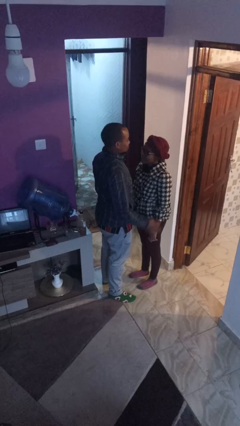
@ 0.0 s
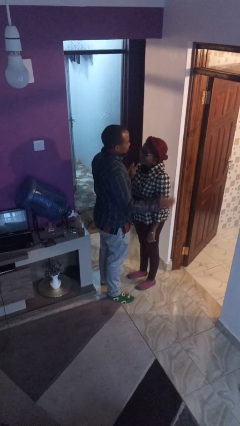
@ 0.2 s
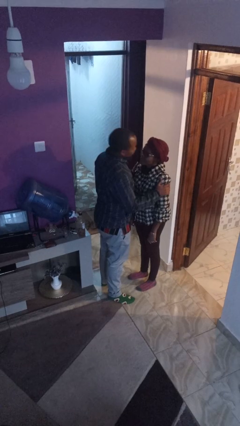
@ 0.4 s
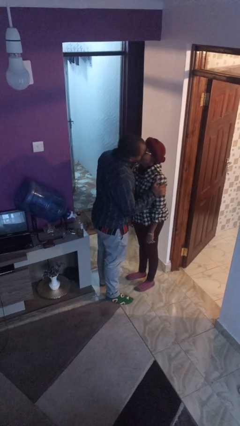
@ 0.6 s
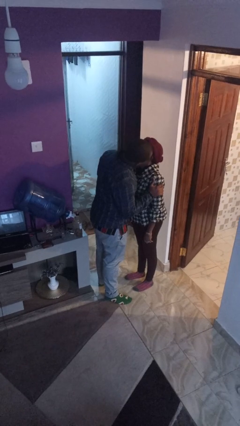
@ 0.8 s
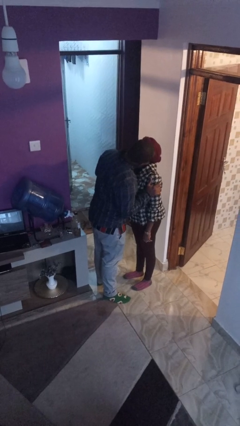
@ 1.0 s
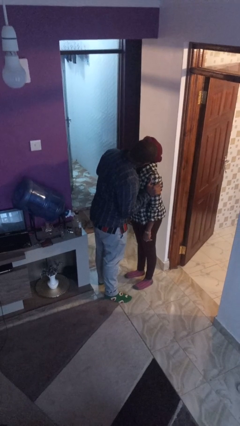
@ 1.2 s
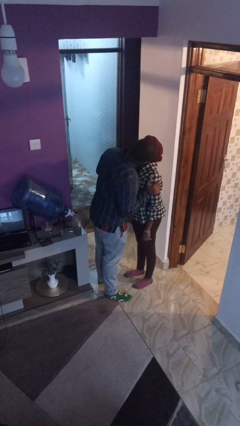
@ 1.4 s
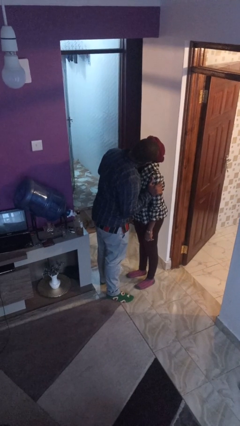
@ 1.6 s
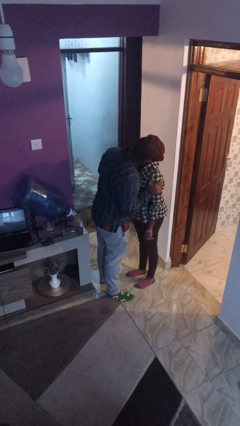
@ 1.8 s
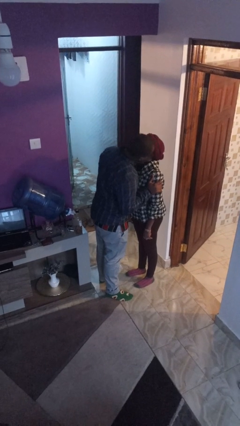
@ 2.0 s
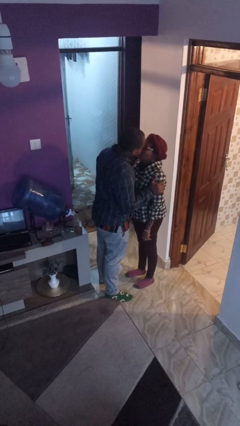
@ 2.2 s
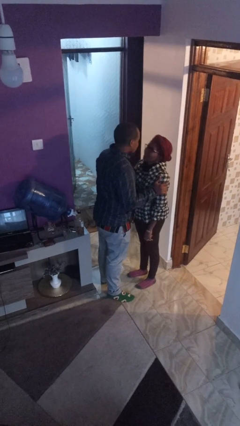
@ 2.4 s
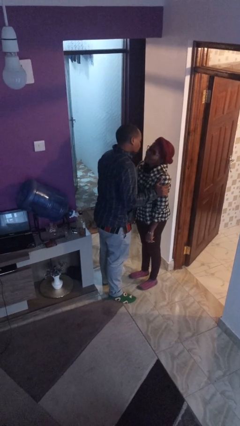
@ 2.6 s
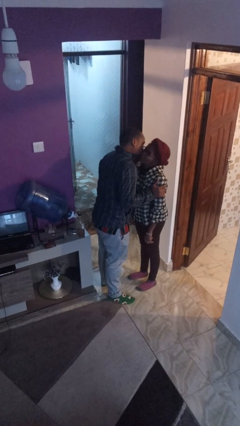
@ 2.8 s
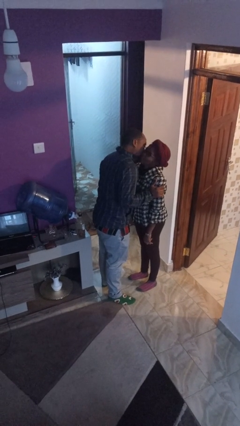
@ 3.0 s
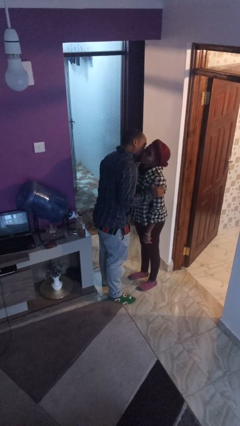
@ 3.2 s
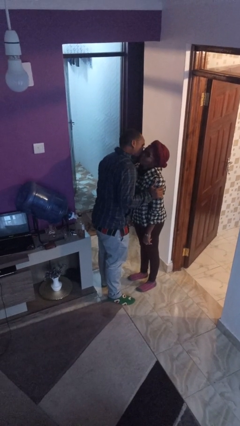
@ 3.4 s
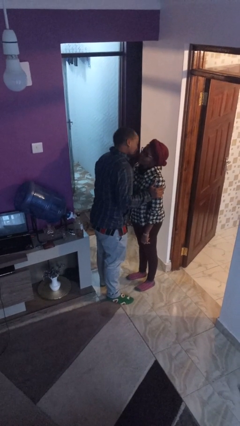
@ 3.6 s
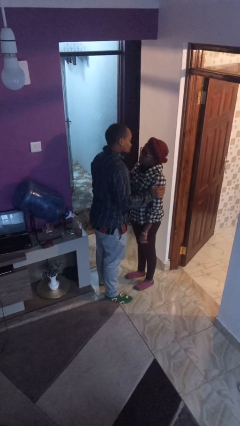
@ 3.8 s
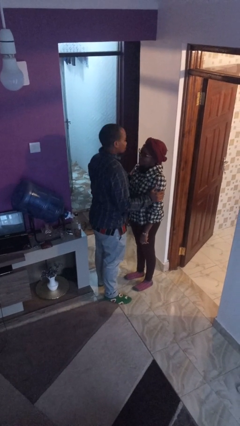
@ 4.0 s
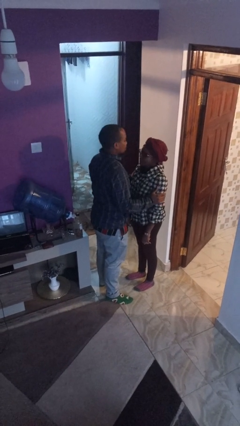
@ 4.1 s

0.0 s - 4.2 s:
person kisses cheek of person

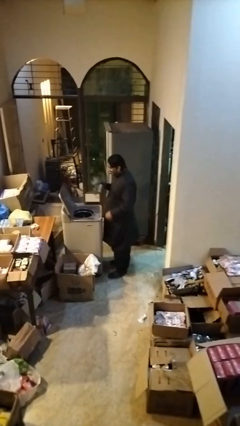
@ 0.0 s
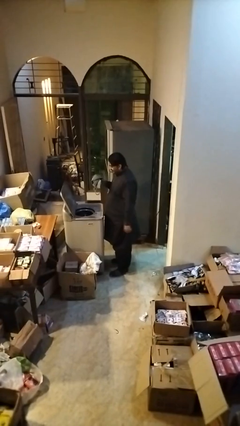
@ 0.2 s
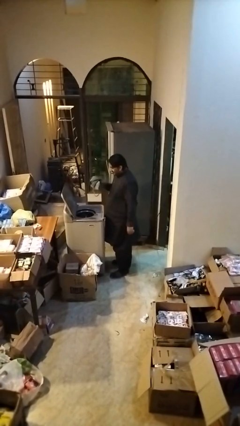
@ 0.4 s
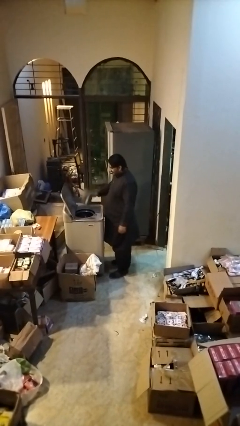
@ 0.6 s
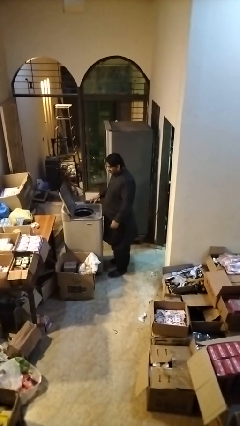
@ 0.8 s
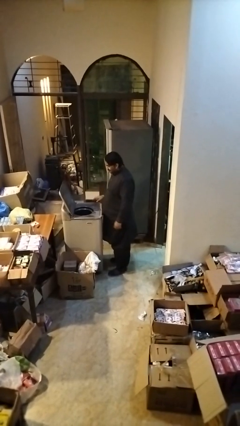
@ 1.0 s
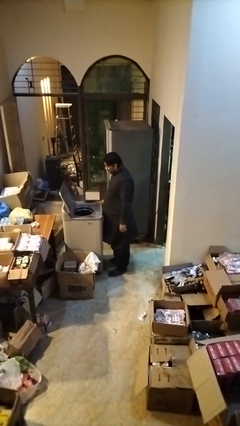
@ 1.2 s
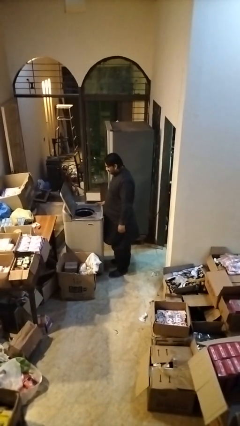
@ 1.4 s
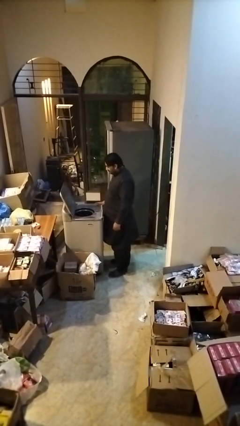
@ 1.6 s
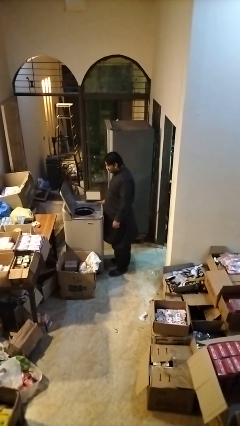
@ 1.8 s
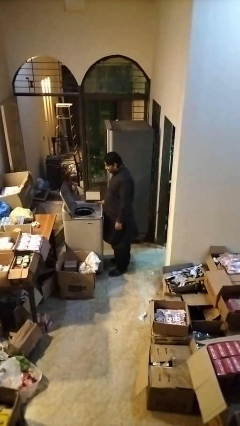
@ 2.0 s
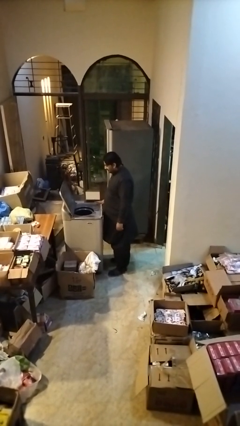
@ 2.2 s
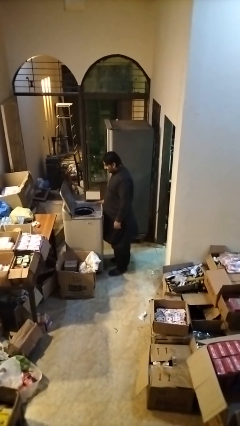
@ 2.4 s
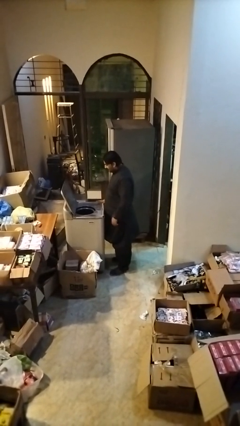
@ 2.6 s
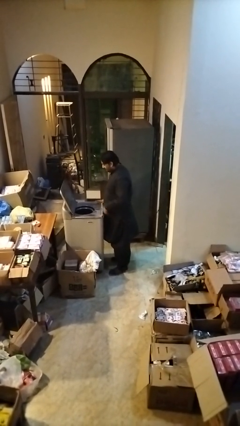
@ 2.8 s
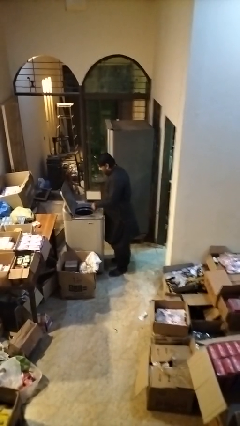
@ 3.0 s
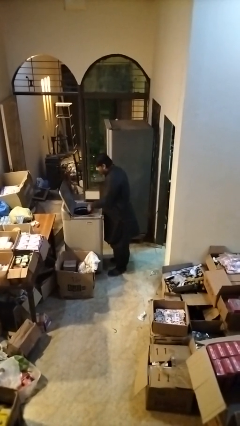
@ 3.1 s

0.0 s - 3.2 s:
person loads dryer

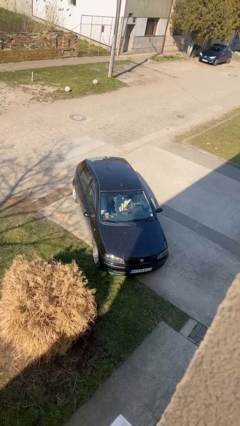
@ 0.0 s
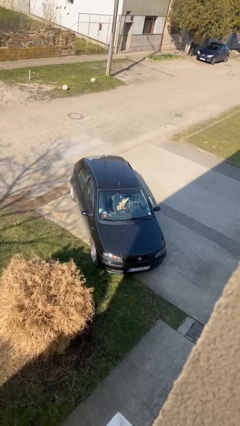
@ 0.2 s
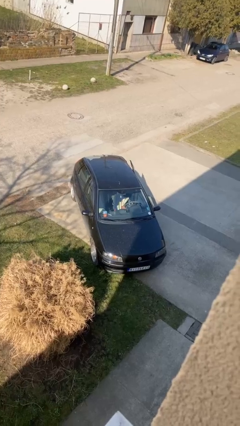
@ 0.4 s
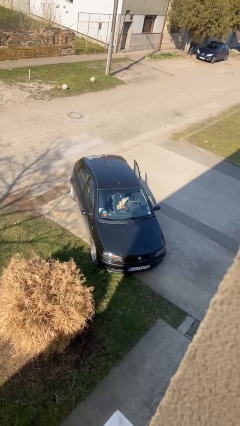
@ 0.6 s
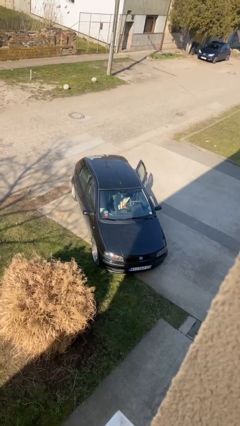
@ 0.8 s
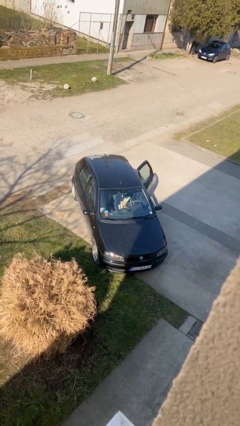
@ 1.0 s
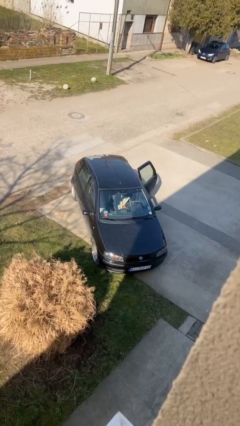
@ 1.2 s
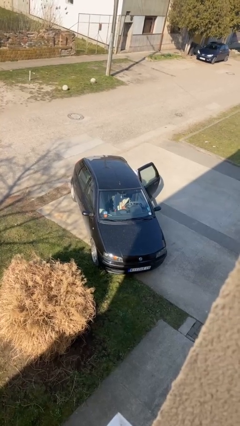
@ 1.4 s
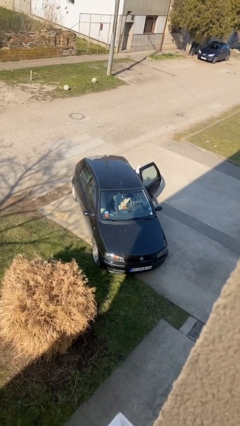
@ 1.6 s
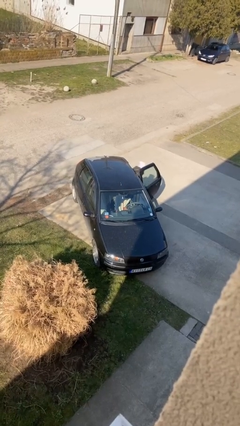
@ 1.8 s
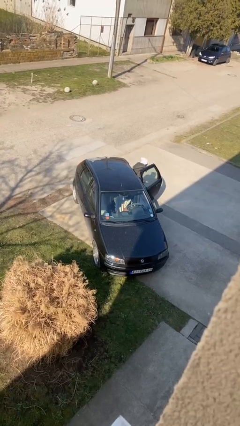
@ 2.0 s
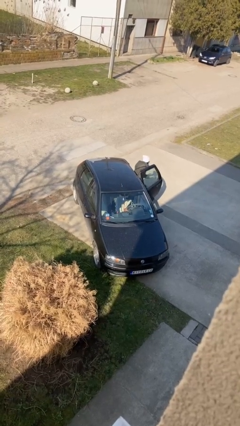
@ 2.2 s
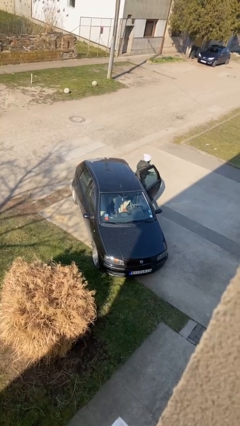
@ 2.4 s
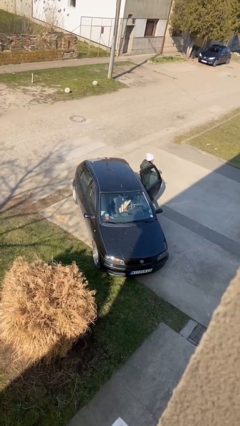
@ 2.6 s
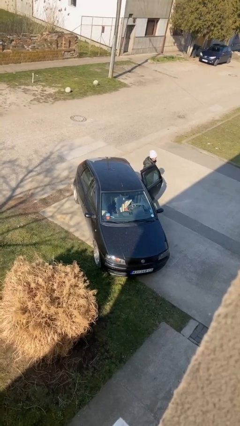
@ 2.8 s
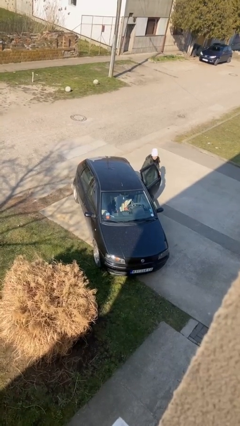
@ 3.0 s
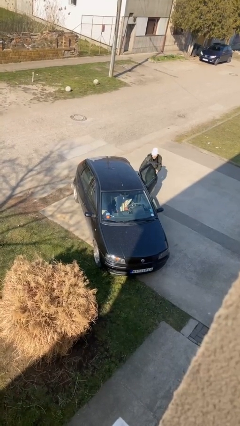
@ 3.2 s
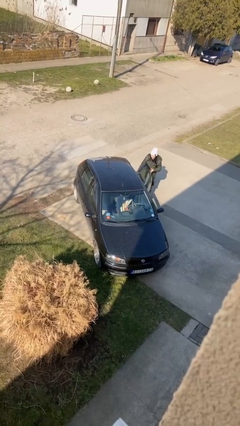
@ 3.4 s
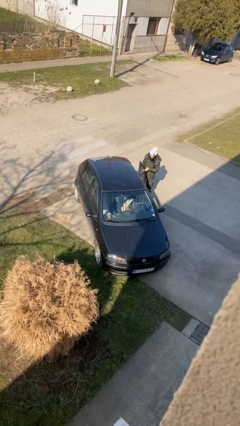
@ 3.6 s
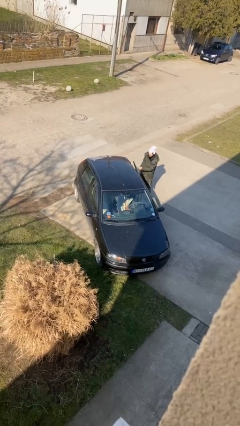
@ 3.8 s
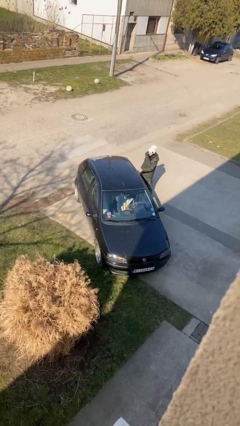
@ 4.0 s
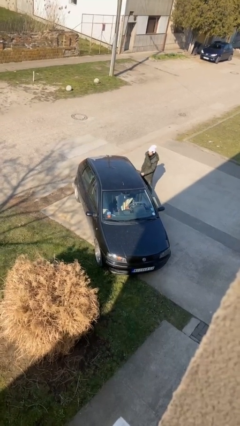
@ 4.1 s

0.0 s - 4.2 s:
car drops off person

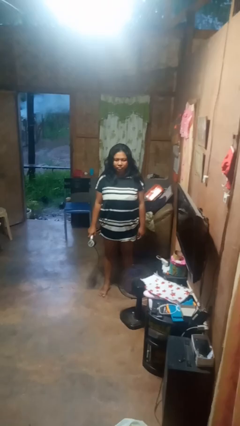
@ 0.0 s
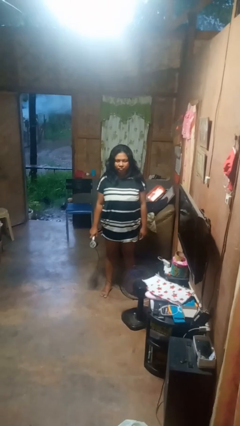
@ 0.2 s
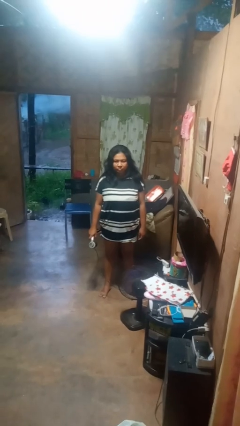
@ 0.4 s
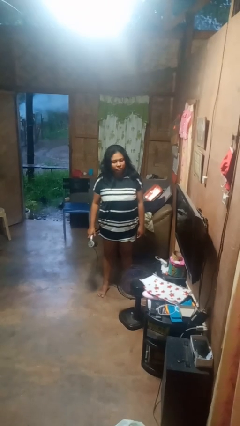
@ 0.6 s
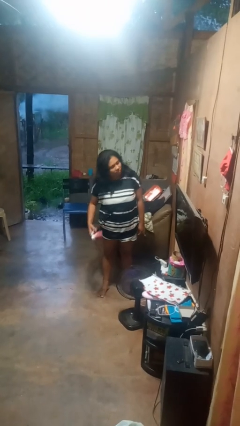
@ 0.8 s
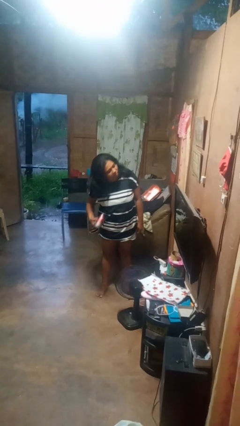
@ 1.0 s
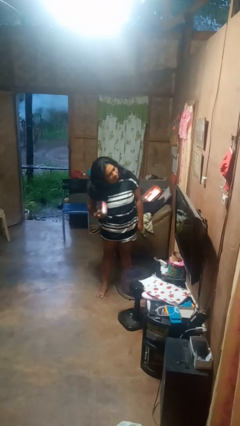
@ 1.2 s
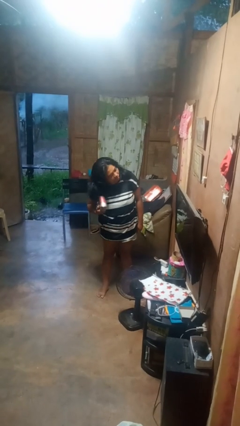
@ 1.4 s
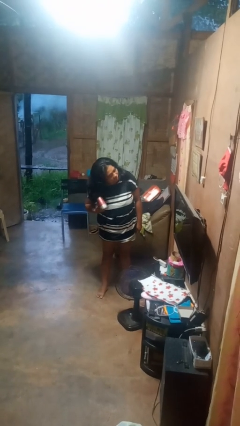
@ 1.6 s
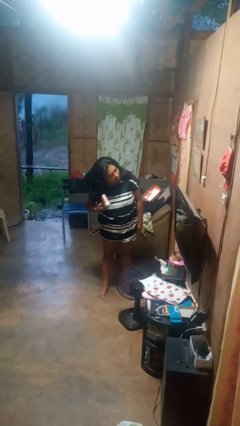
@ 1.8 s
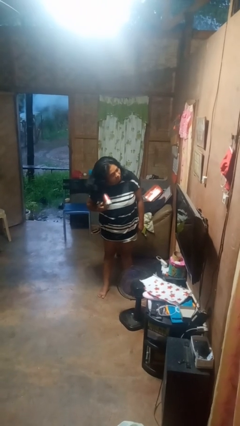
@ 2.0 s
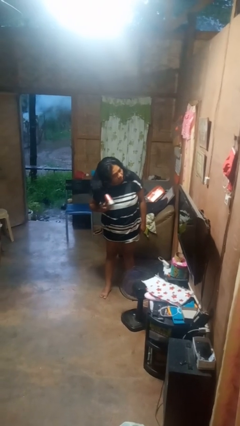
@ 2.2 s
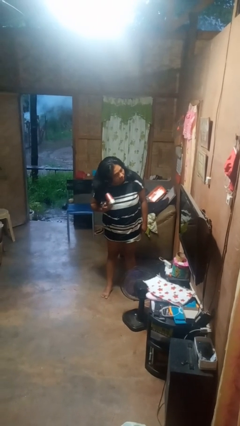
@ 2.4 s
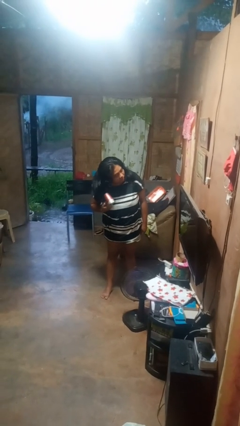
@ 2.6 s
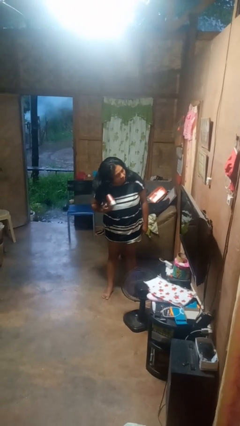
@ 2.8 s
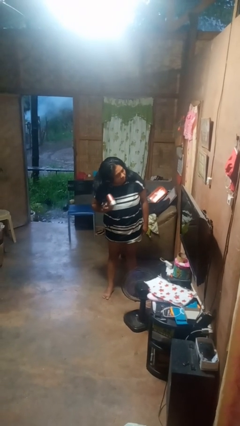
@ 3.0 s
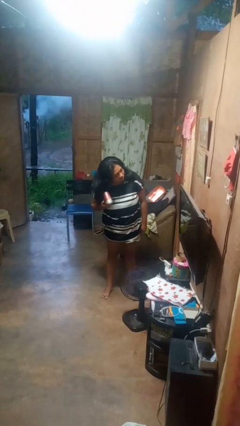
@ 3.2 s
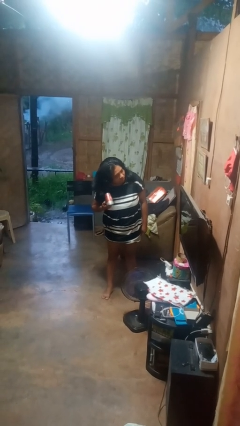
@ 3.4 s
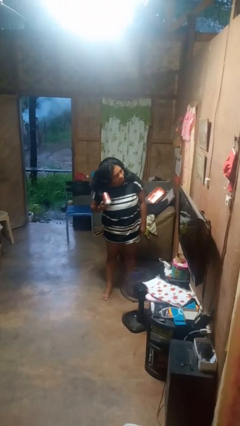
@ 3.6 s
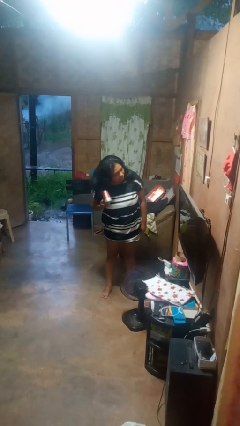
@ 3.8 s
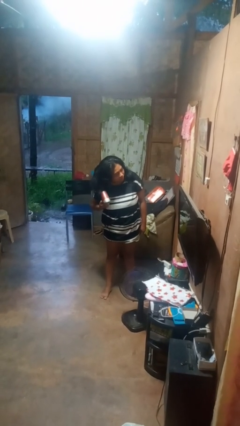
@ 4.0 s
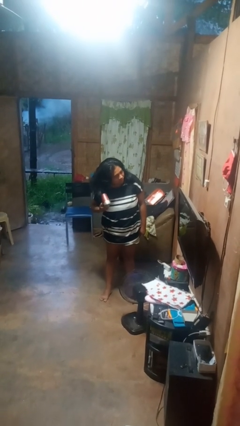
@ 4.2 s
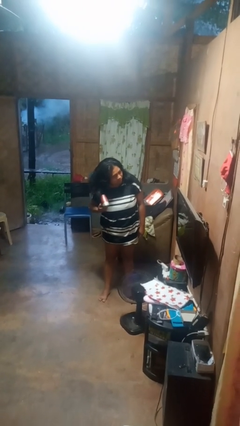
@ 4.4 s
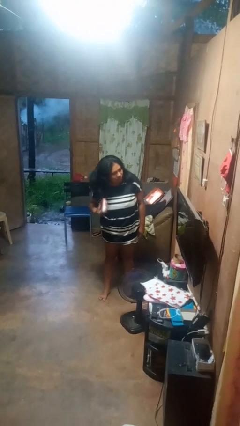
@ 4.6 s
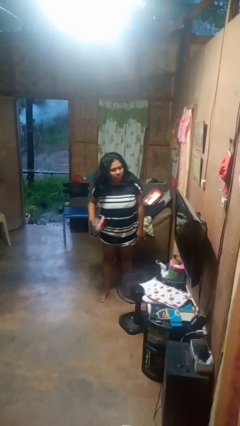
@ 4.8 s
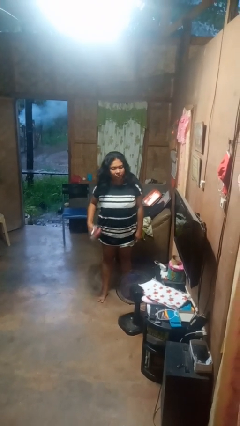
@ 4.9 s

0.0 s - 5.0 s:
person dries hair with hairdryer

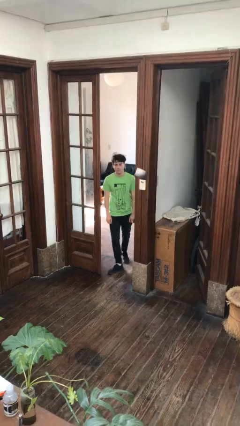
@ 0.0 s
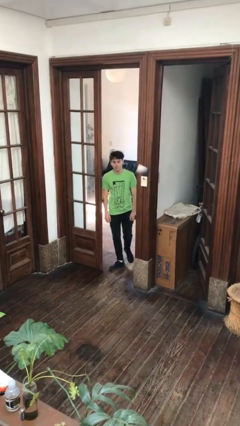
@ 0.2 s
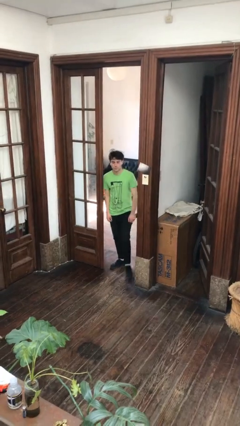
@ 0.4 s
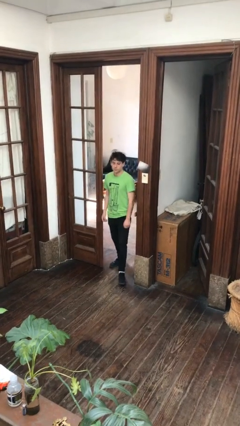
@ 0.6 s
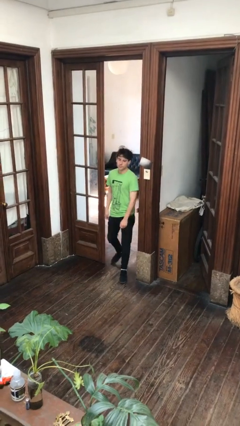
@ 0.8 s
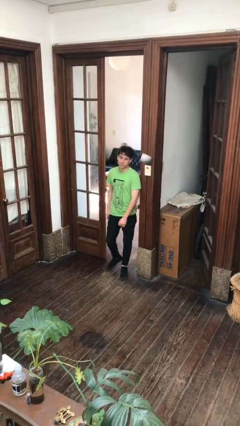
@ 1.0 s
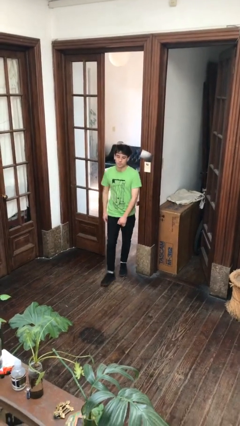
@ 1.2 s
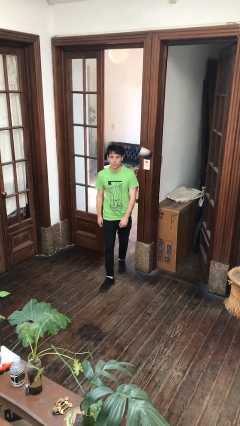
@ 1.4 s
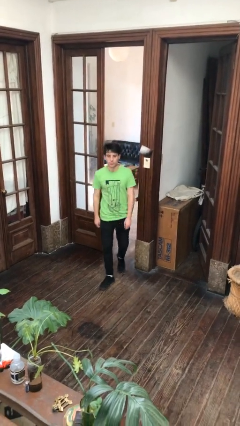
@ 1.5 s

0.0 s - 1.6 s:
person enters scene through structure
